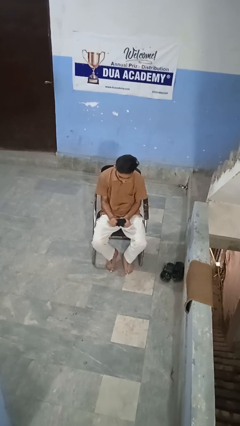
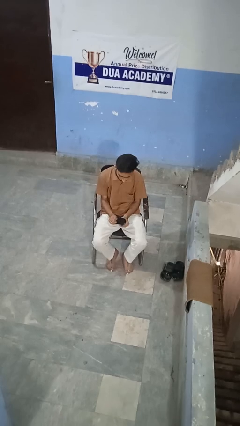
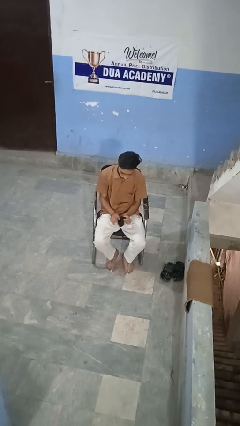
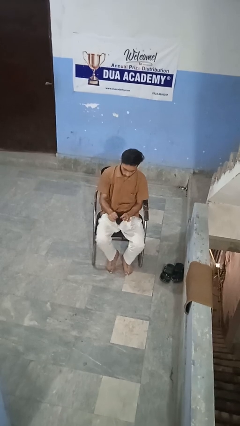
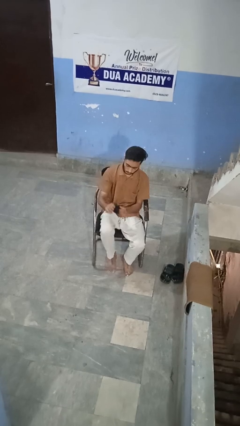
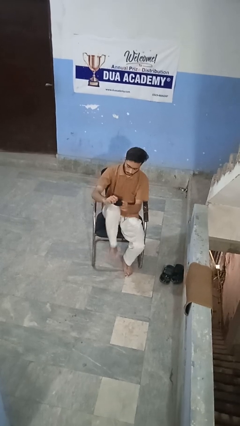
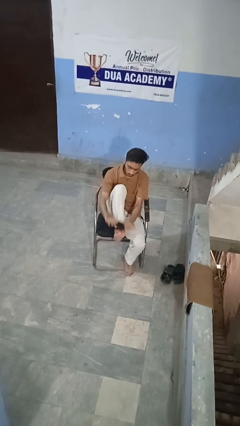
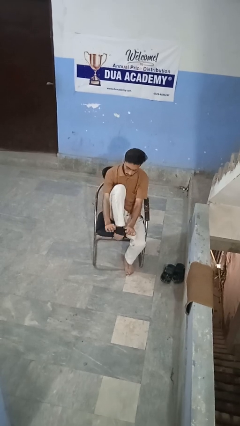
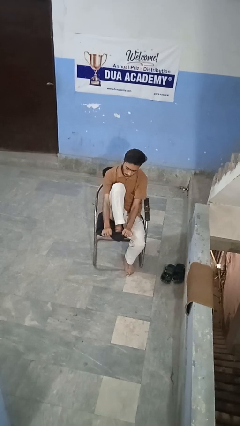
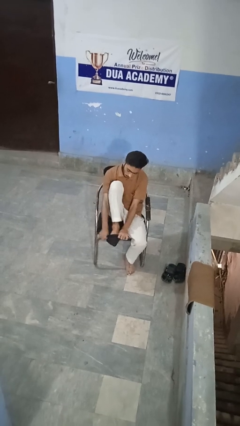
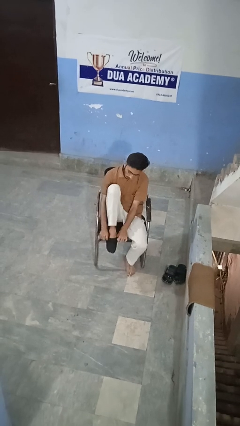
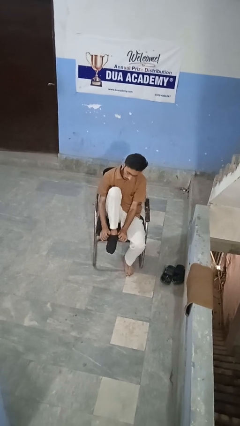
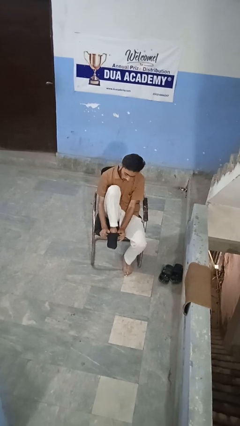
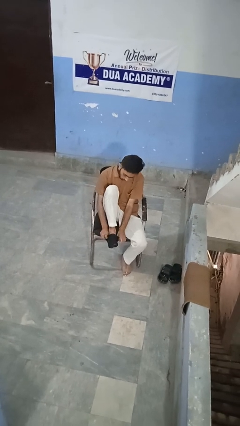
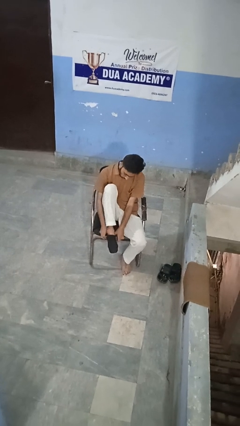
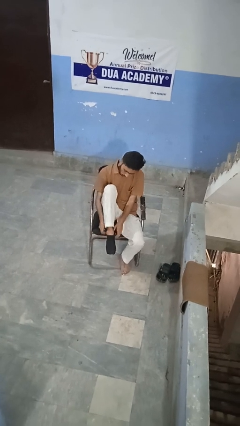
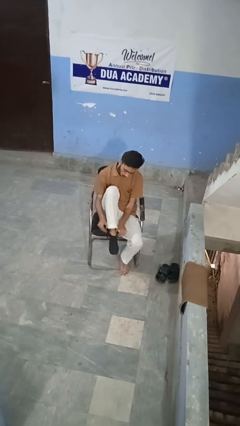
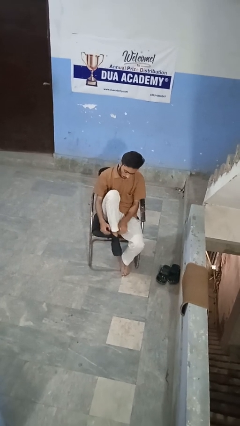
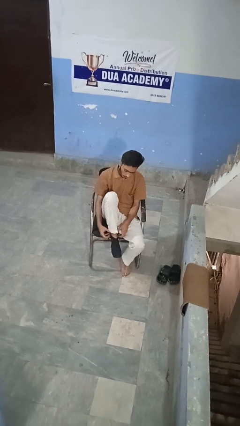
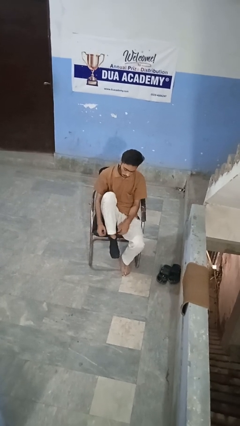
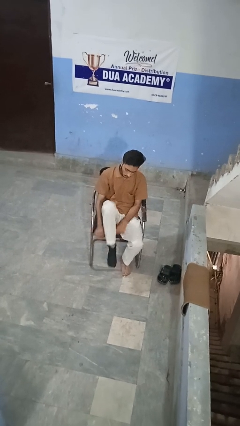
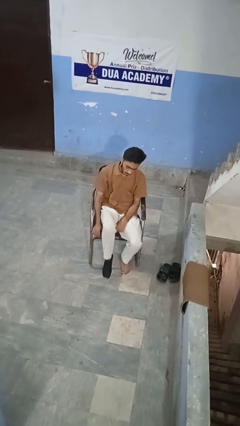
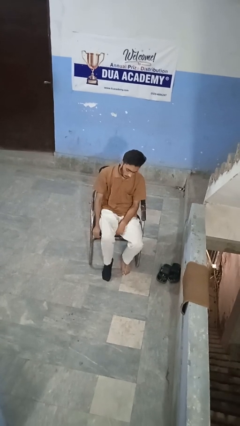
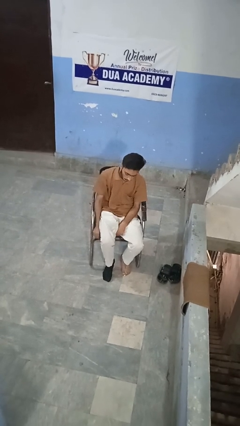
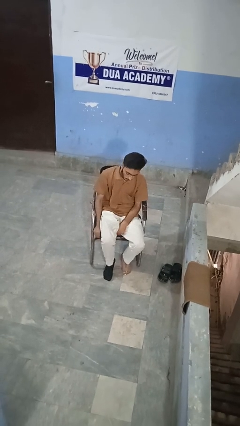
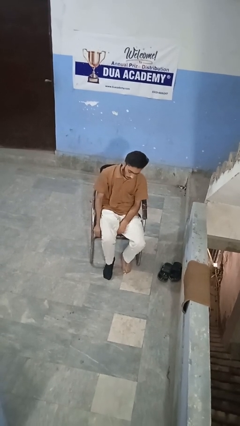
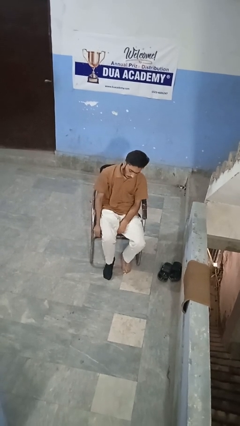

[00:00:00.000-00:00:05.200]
person puts on socks

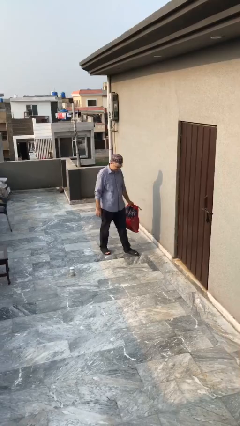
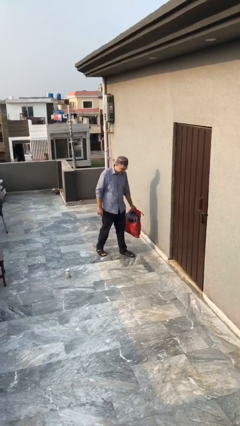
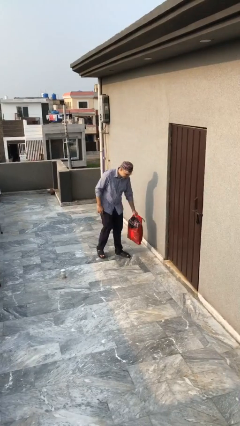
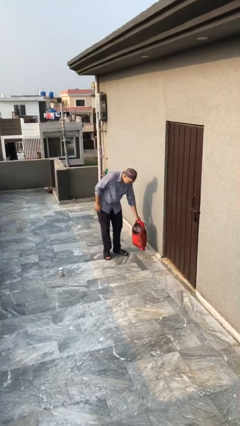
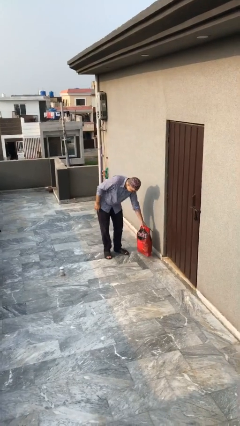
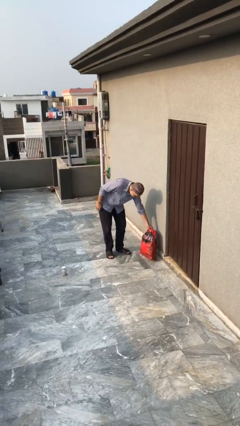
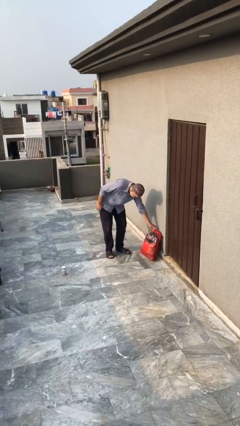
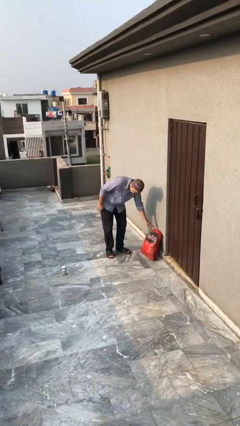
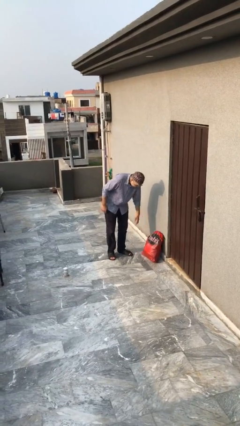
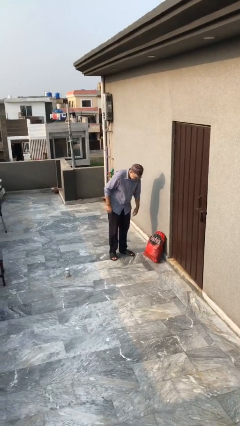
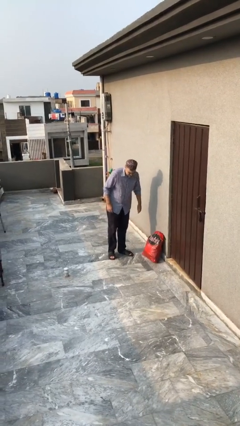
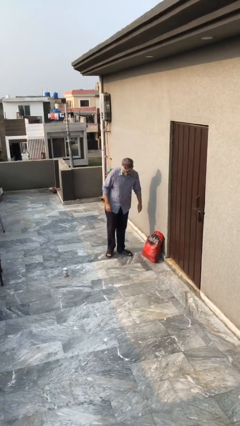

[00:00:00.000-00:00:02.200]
person puts down object on floor

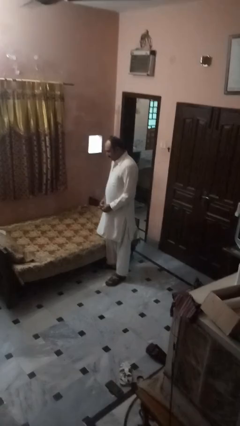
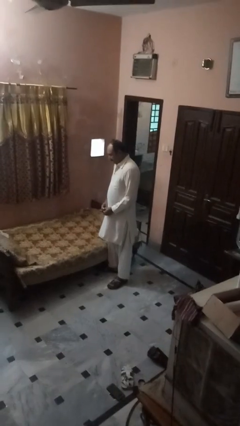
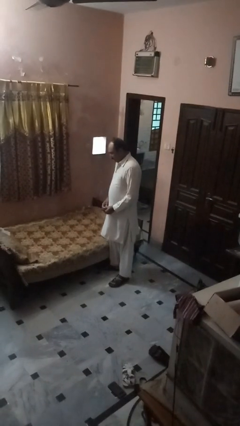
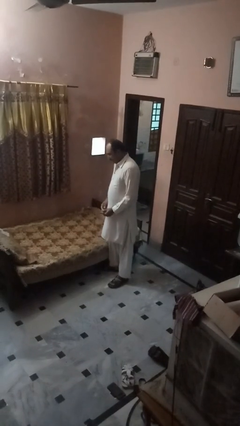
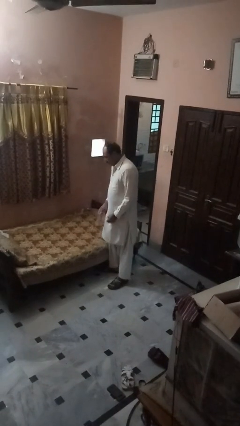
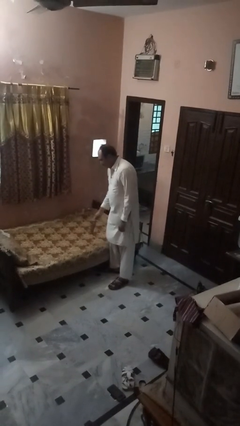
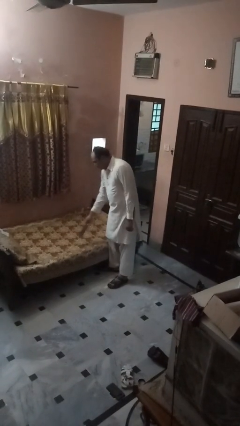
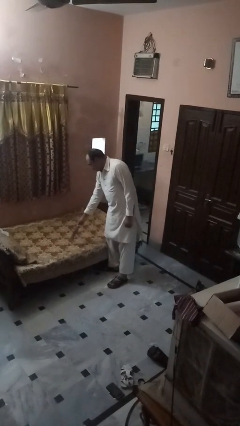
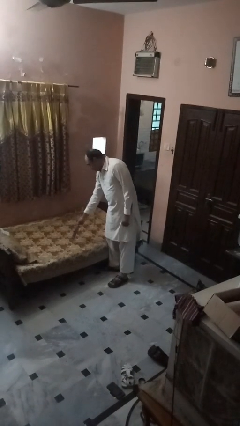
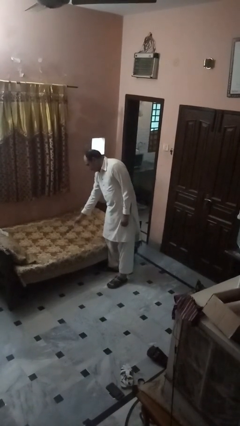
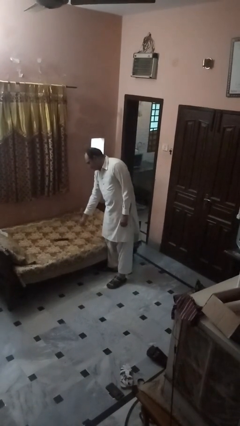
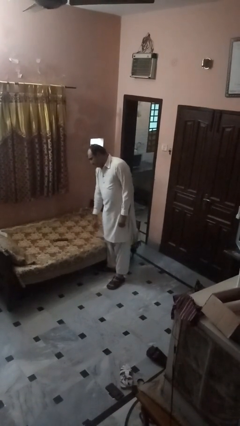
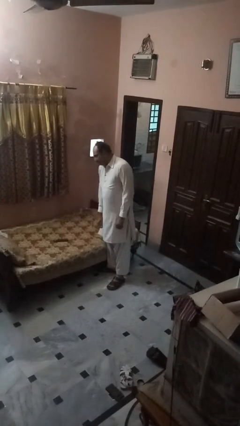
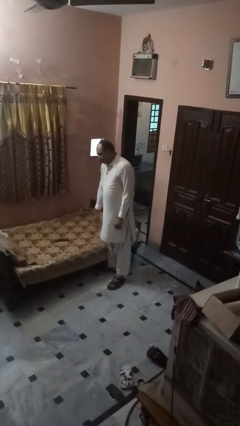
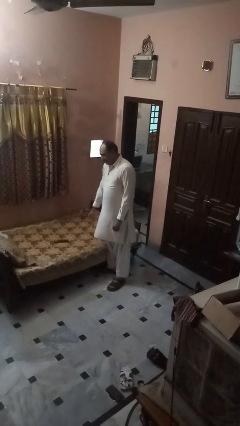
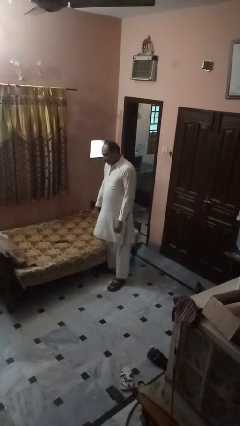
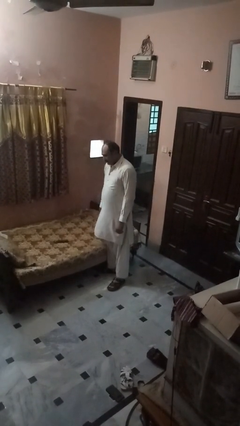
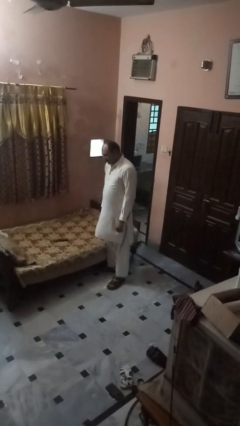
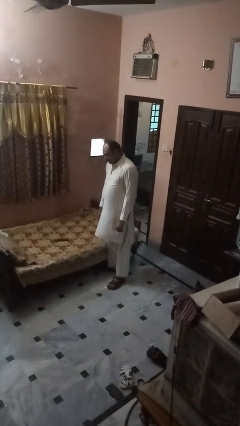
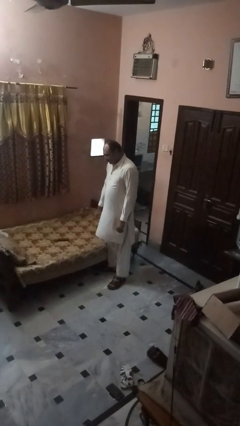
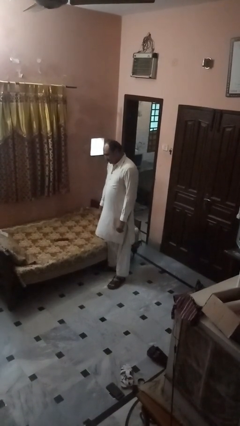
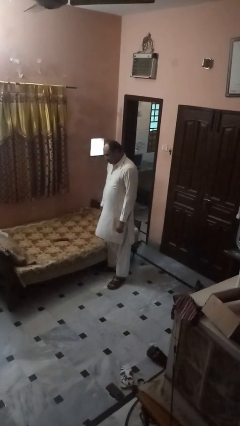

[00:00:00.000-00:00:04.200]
person puts down object on bed

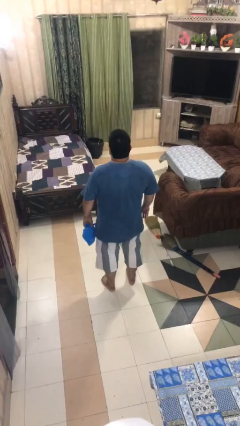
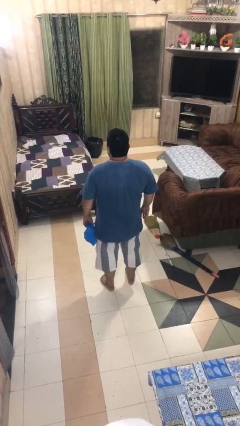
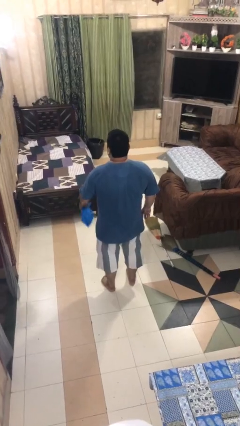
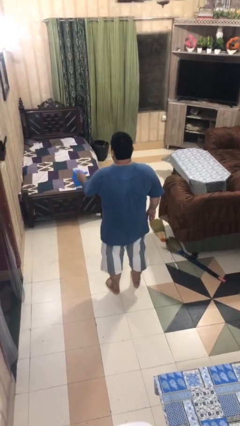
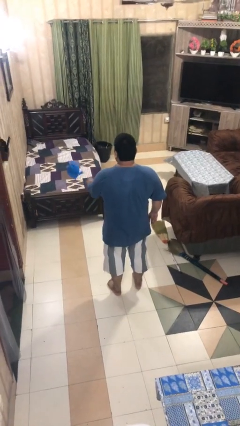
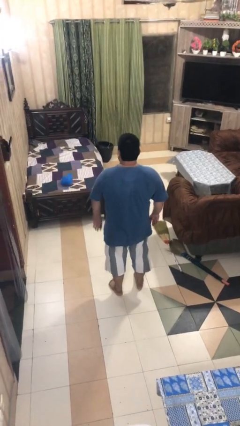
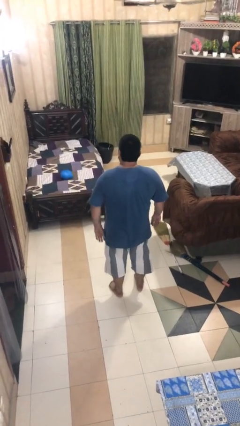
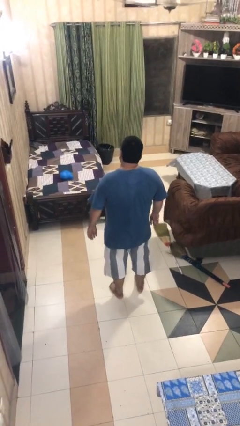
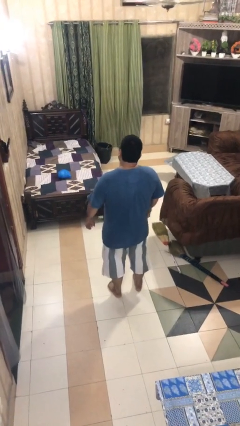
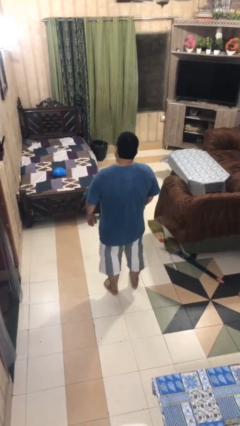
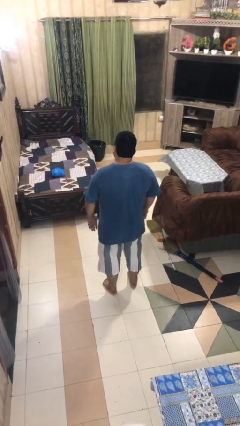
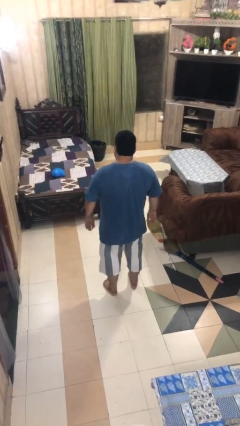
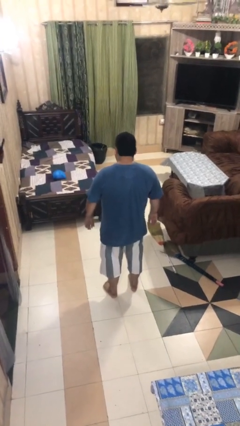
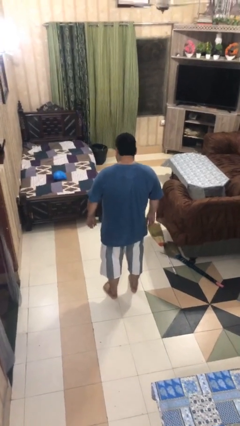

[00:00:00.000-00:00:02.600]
person throws object on bed

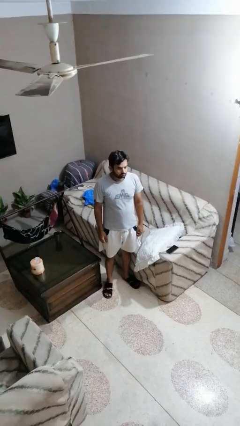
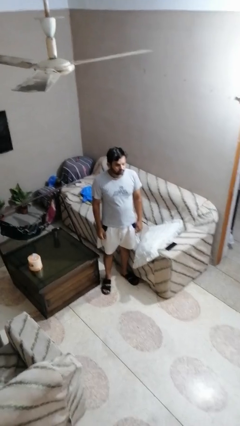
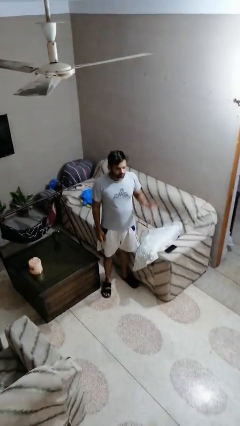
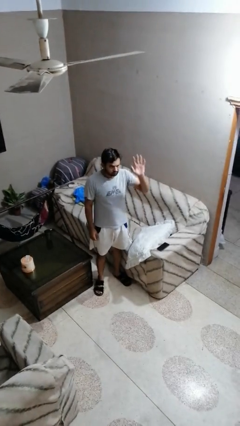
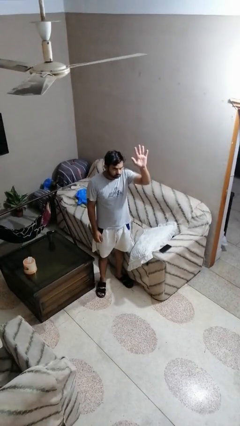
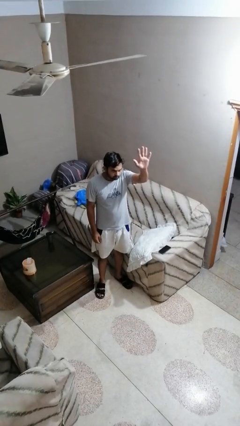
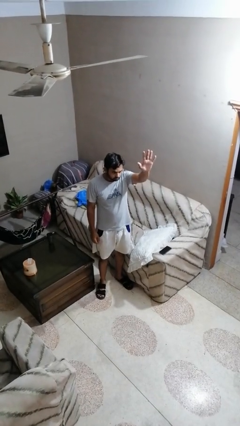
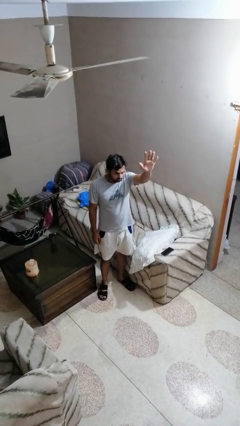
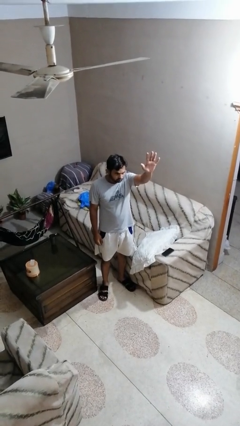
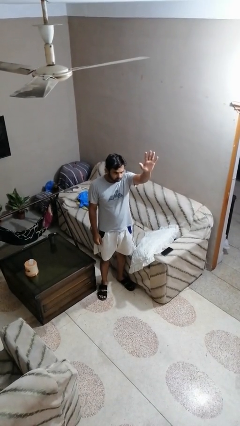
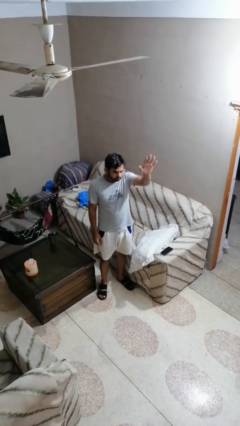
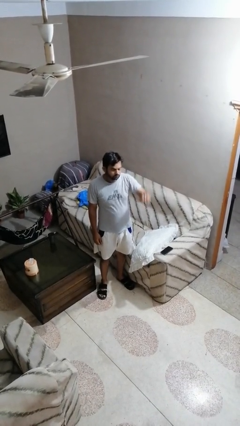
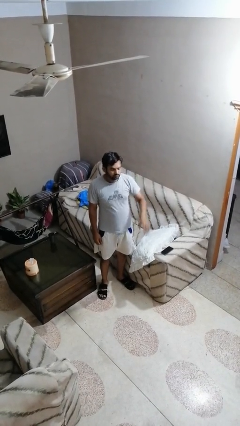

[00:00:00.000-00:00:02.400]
person gestures stop

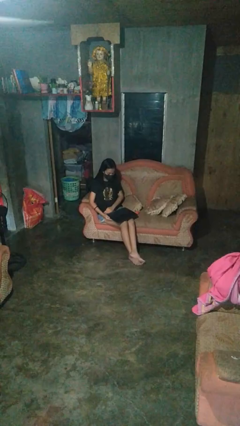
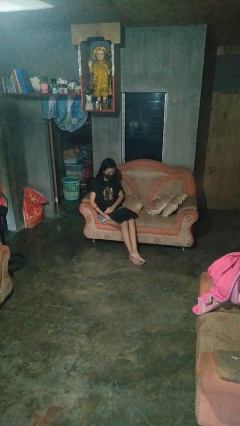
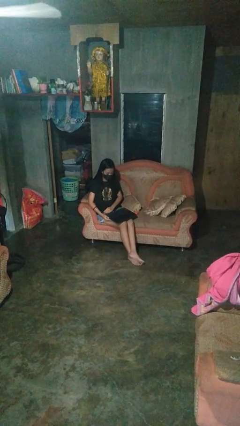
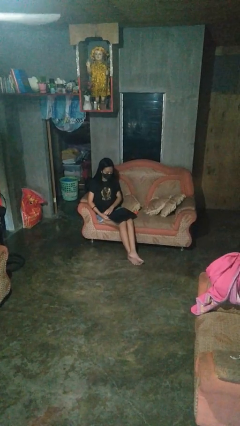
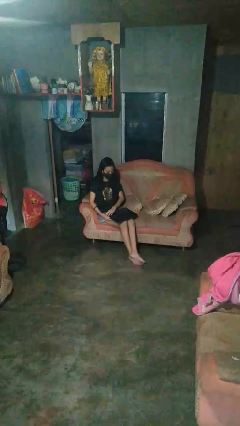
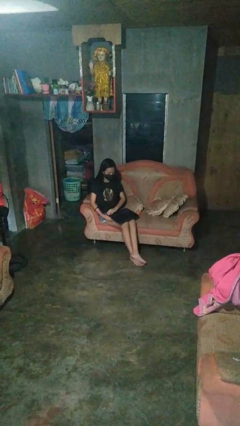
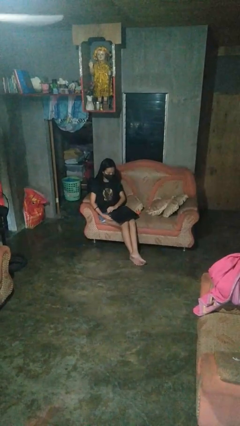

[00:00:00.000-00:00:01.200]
person opens laptop
